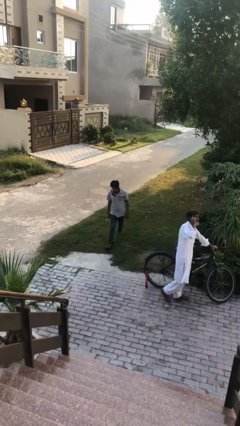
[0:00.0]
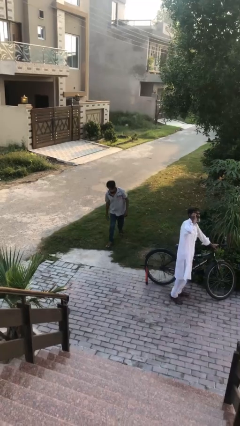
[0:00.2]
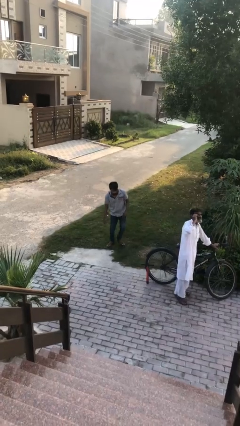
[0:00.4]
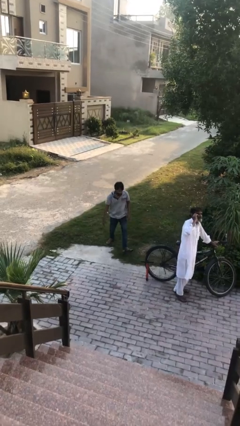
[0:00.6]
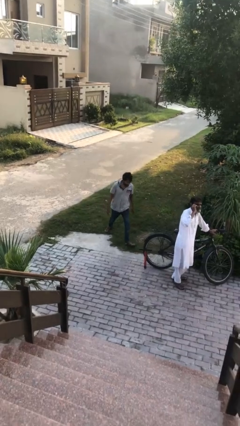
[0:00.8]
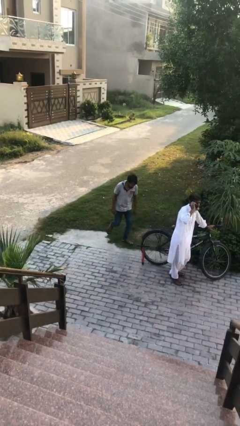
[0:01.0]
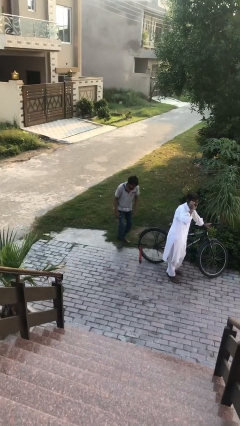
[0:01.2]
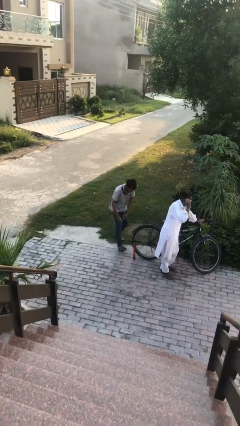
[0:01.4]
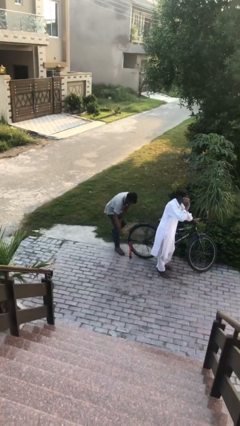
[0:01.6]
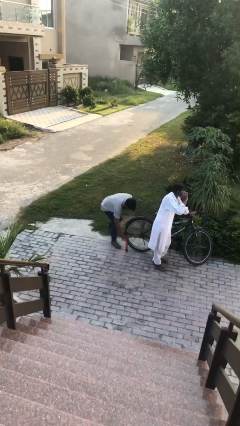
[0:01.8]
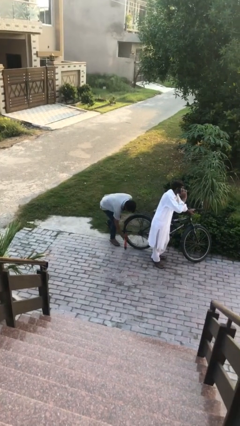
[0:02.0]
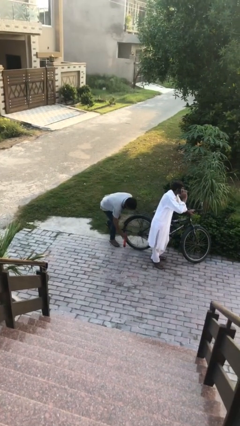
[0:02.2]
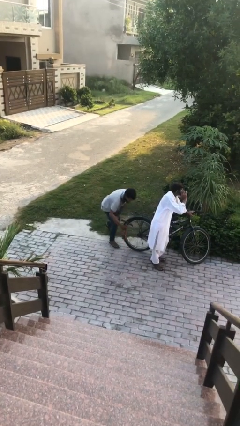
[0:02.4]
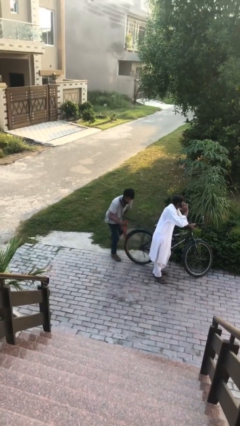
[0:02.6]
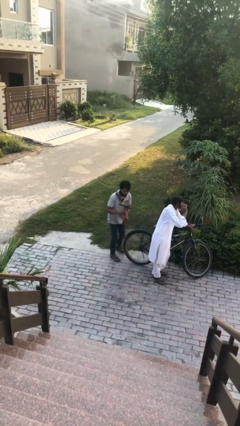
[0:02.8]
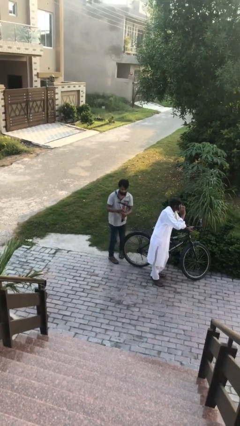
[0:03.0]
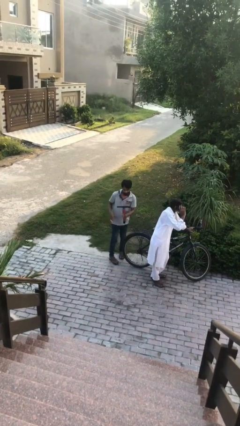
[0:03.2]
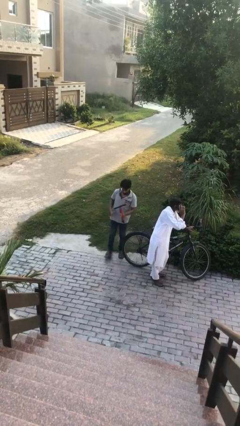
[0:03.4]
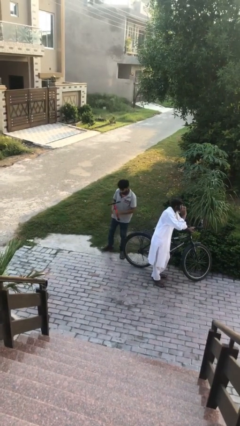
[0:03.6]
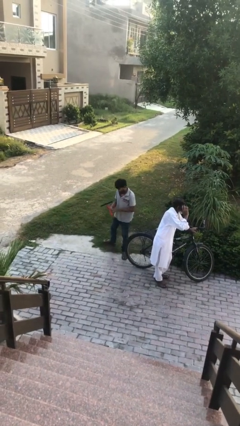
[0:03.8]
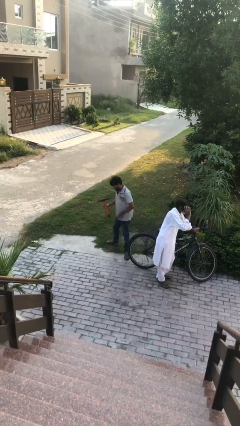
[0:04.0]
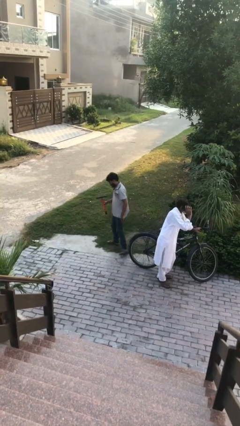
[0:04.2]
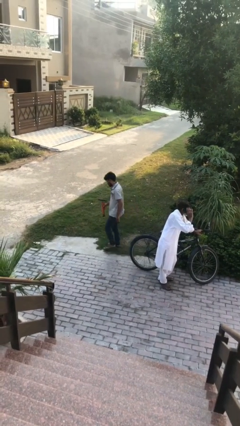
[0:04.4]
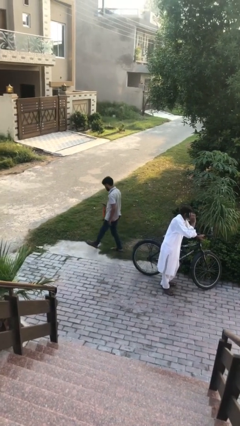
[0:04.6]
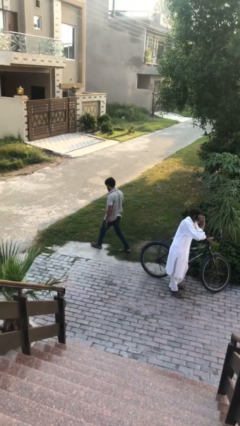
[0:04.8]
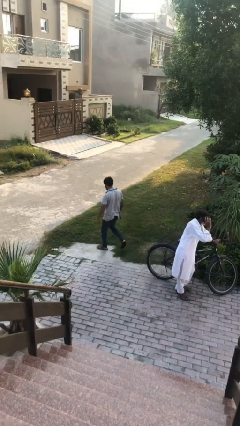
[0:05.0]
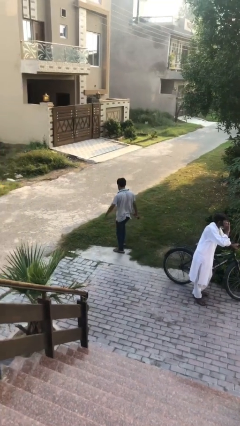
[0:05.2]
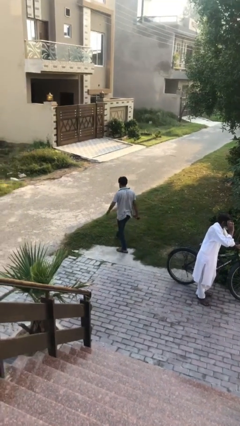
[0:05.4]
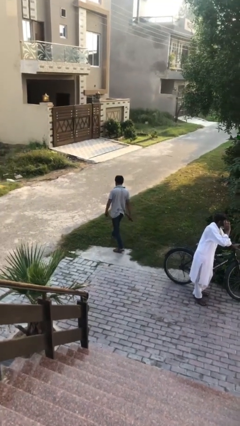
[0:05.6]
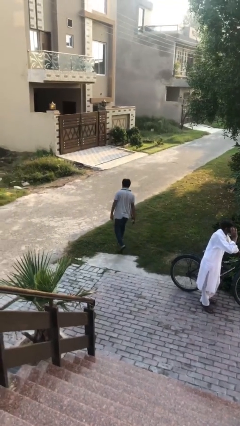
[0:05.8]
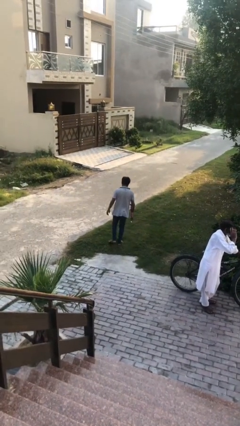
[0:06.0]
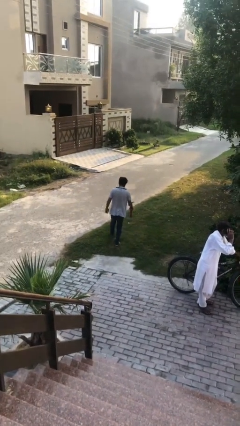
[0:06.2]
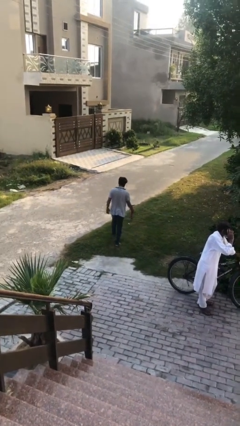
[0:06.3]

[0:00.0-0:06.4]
person steals object from person

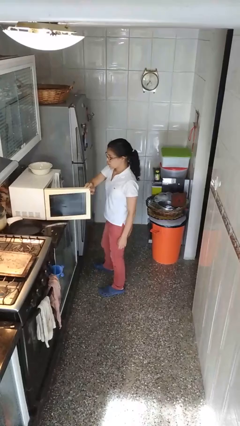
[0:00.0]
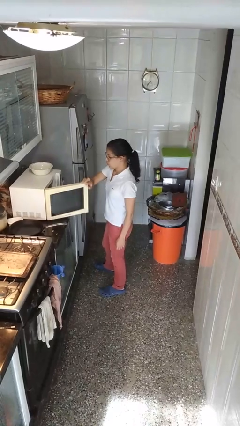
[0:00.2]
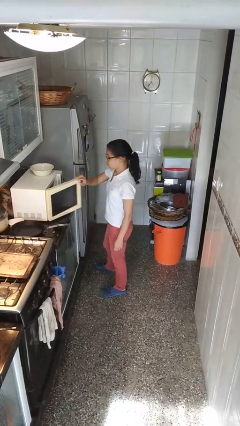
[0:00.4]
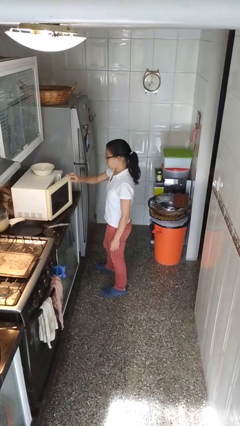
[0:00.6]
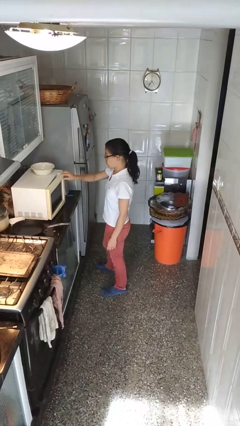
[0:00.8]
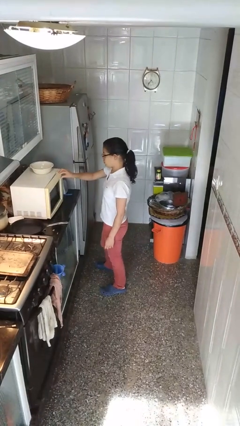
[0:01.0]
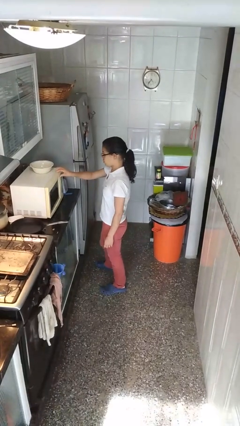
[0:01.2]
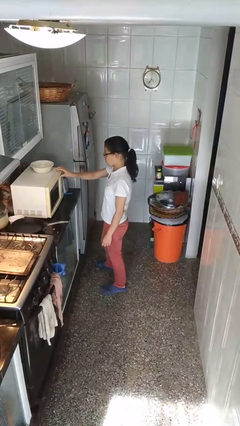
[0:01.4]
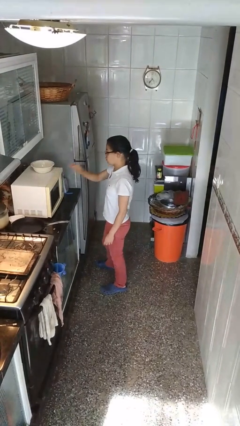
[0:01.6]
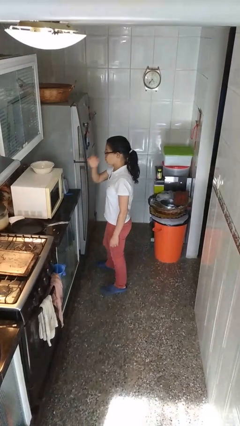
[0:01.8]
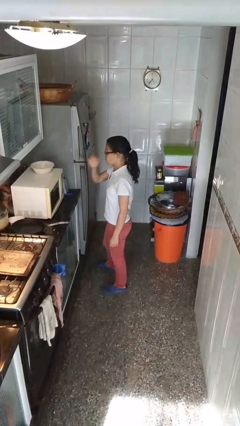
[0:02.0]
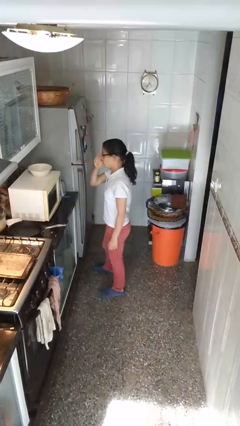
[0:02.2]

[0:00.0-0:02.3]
person closes microwave

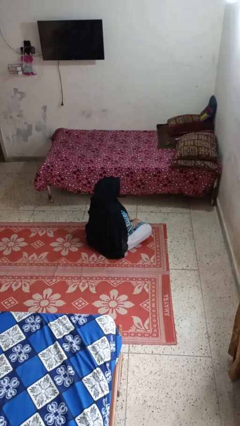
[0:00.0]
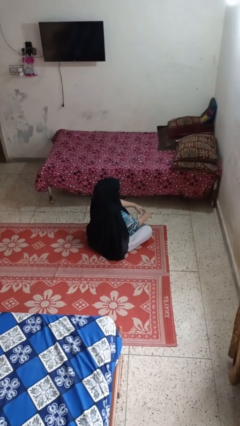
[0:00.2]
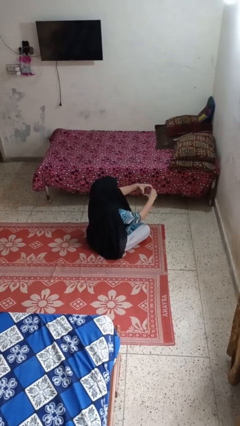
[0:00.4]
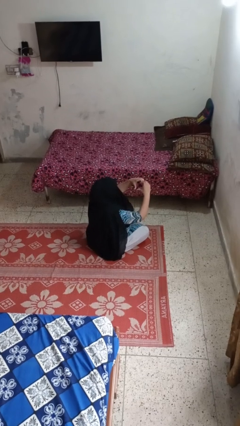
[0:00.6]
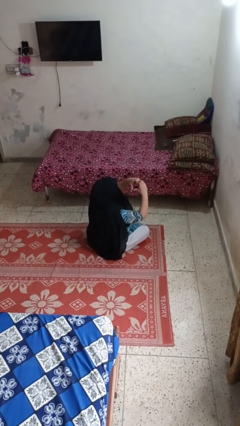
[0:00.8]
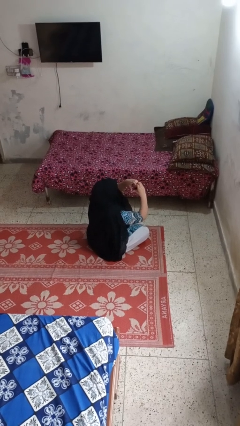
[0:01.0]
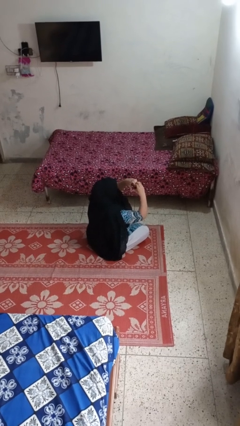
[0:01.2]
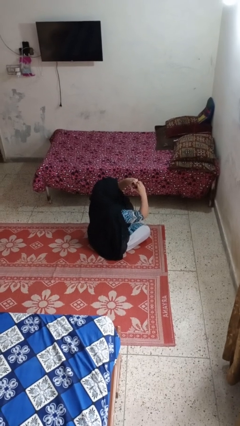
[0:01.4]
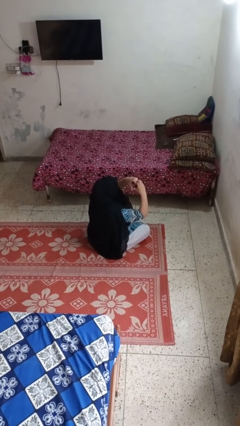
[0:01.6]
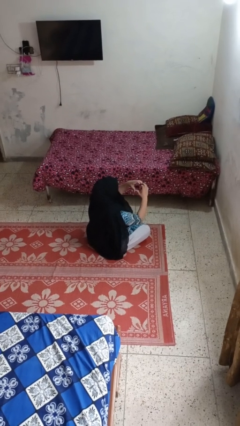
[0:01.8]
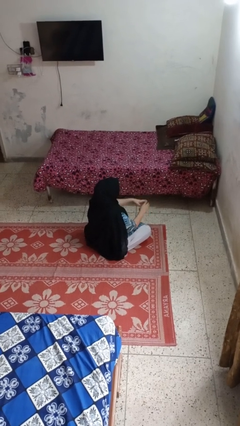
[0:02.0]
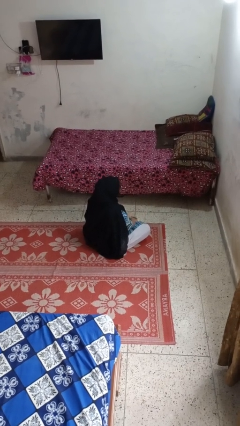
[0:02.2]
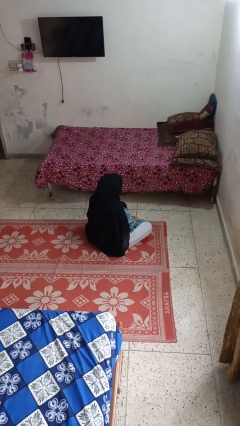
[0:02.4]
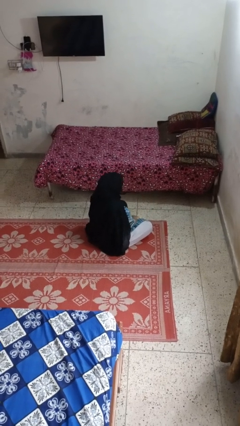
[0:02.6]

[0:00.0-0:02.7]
person gestures heart

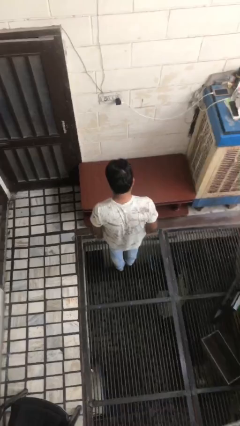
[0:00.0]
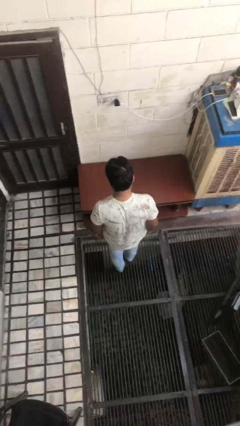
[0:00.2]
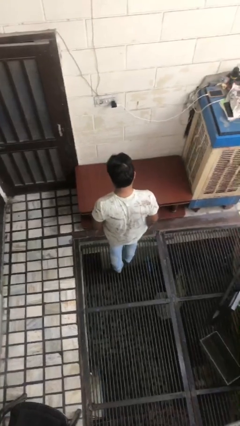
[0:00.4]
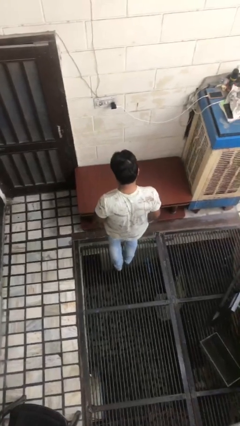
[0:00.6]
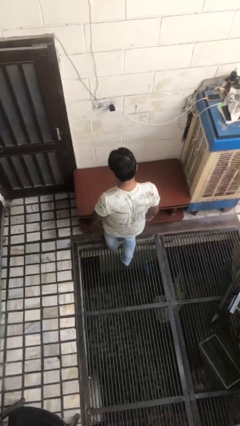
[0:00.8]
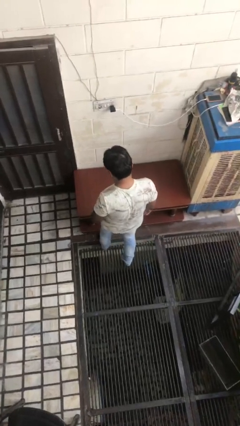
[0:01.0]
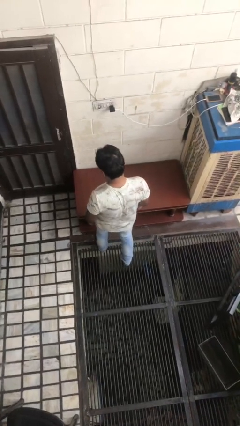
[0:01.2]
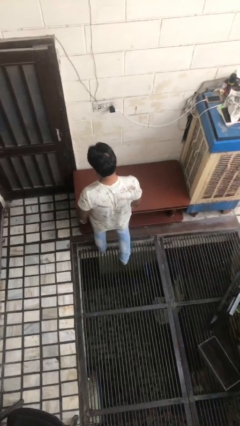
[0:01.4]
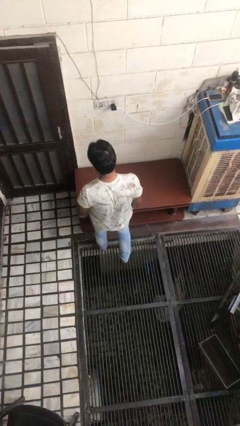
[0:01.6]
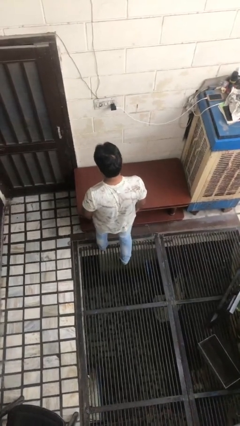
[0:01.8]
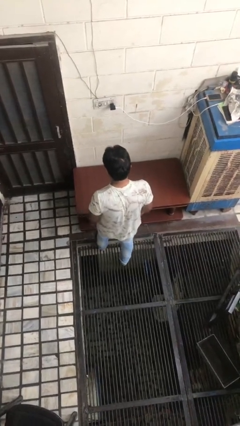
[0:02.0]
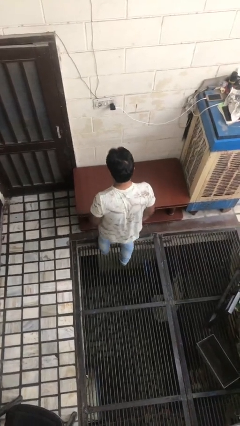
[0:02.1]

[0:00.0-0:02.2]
person bumps into table

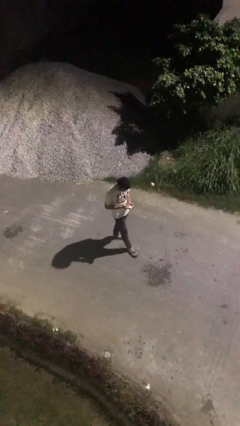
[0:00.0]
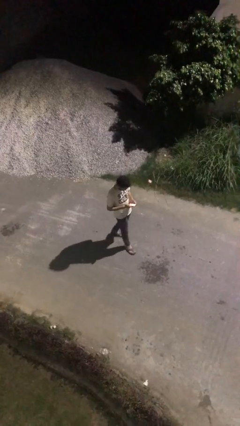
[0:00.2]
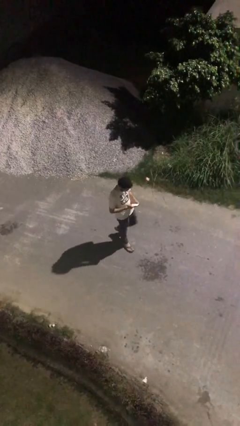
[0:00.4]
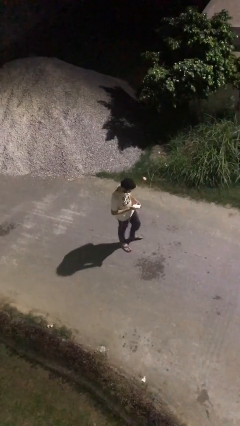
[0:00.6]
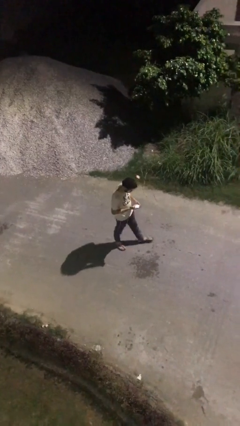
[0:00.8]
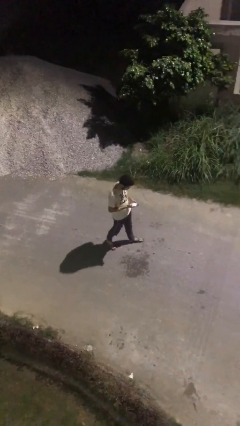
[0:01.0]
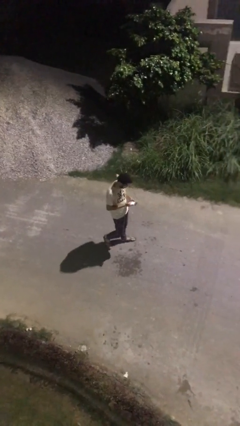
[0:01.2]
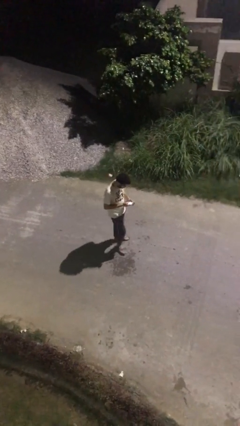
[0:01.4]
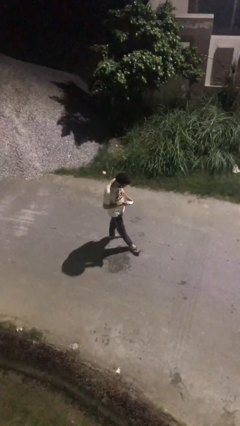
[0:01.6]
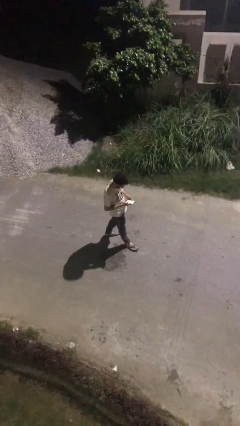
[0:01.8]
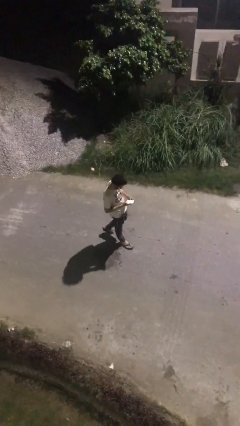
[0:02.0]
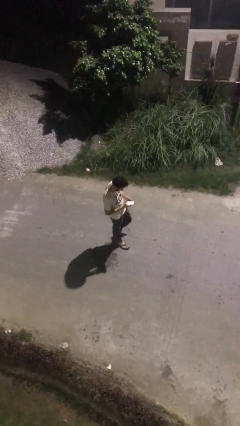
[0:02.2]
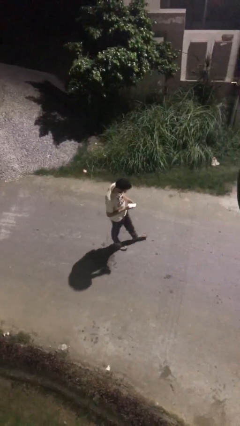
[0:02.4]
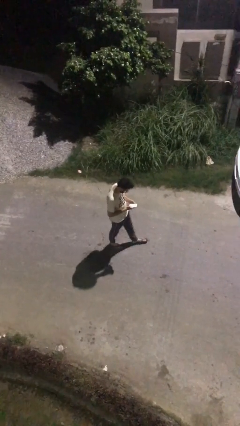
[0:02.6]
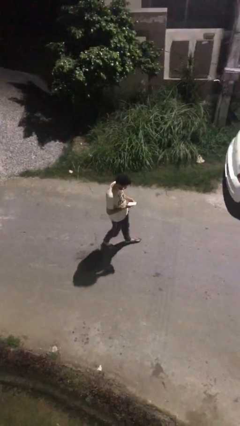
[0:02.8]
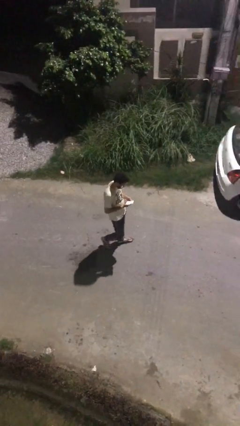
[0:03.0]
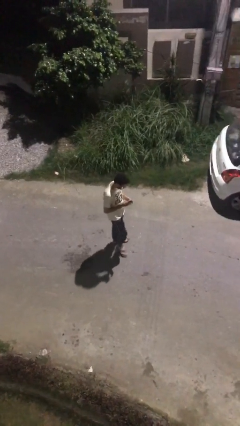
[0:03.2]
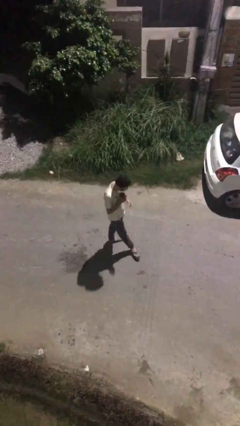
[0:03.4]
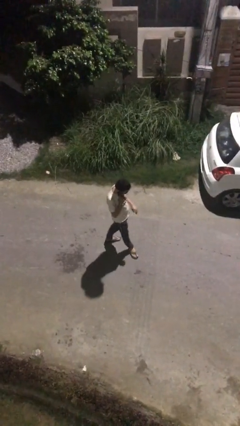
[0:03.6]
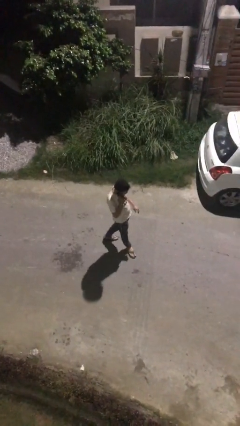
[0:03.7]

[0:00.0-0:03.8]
person texts on phone
